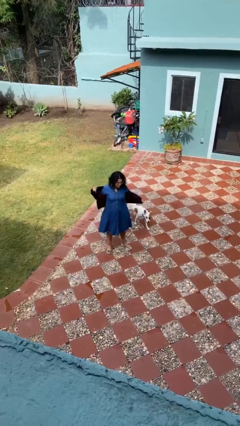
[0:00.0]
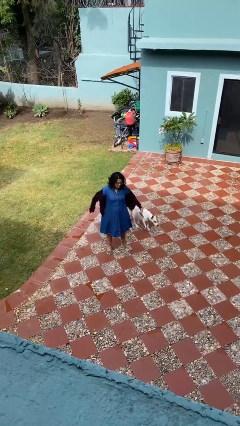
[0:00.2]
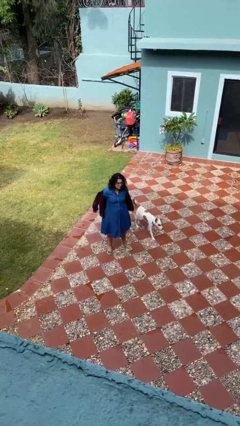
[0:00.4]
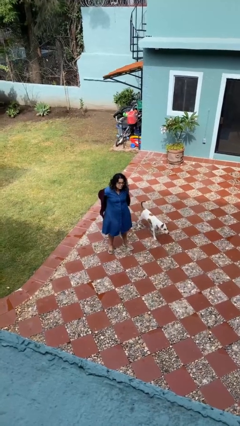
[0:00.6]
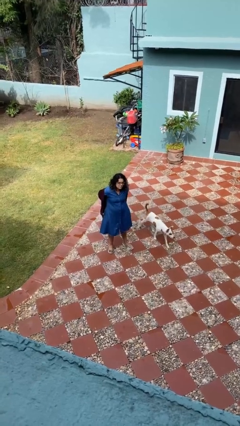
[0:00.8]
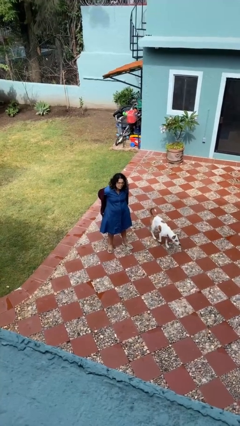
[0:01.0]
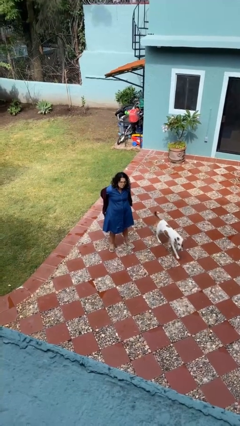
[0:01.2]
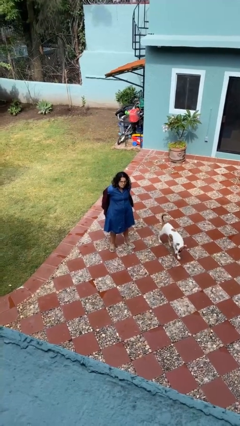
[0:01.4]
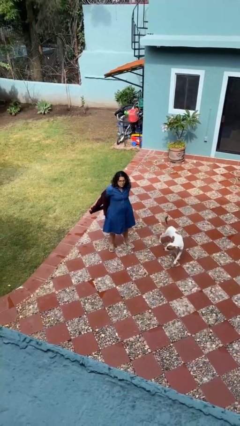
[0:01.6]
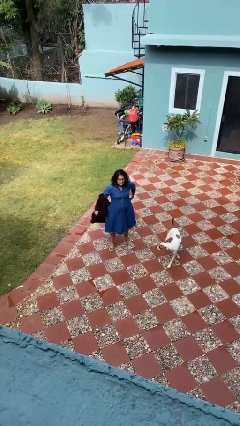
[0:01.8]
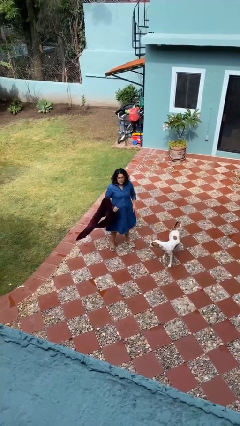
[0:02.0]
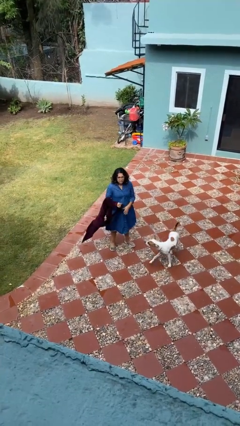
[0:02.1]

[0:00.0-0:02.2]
person takes off jacket

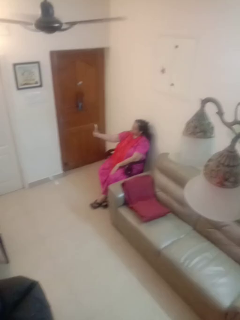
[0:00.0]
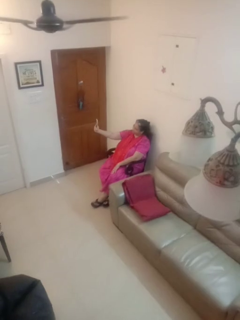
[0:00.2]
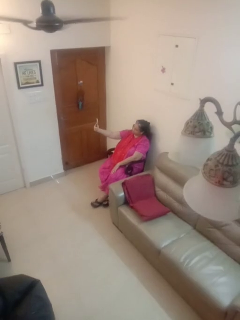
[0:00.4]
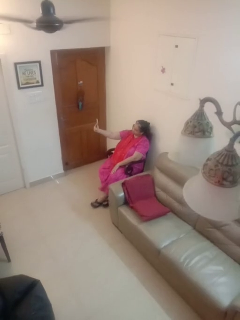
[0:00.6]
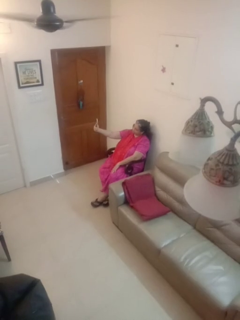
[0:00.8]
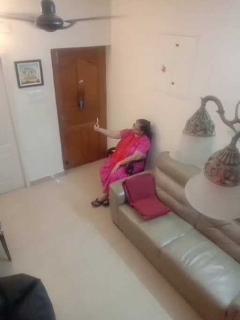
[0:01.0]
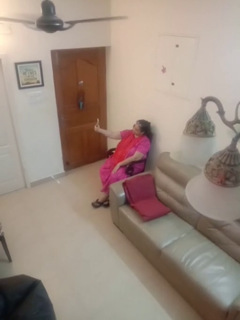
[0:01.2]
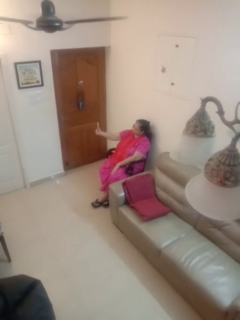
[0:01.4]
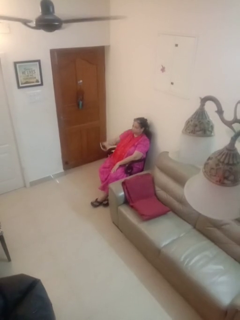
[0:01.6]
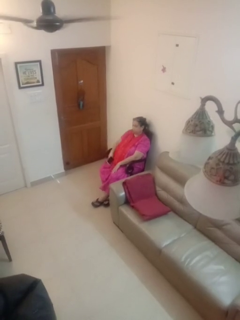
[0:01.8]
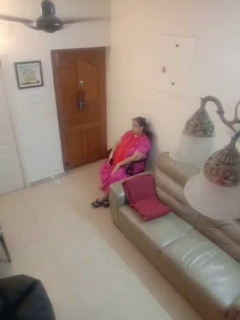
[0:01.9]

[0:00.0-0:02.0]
person takes selfie

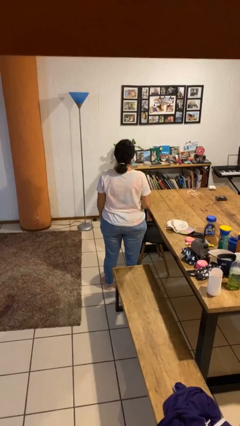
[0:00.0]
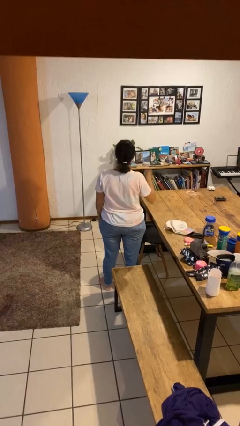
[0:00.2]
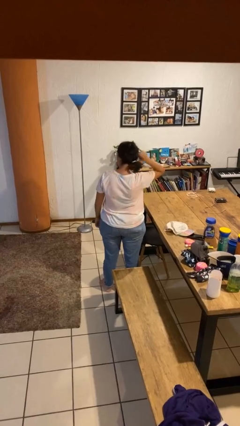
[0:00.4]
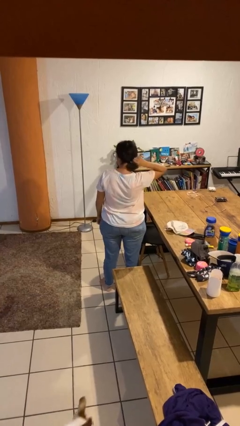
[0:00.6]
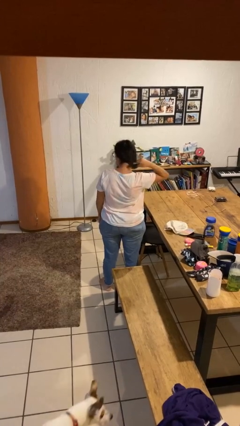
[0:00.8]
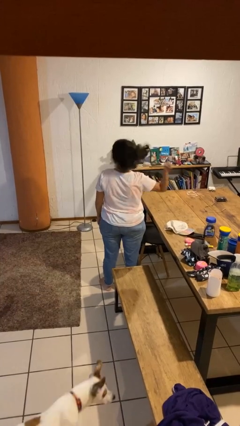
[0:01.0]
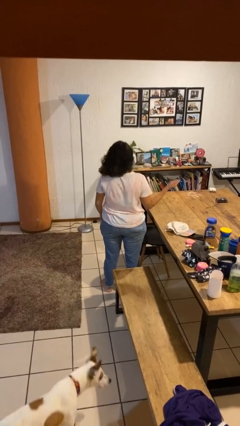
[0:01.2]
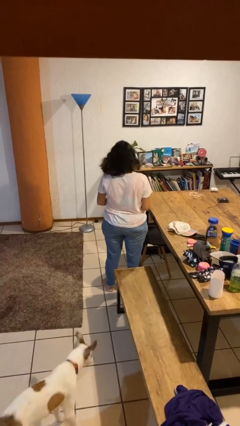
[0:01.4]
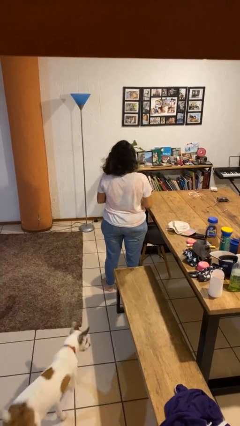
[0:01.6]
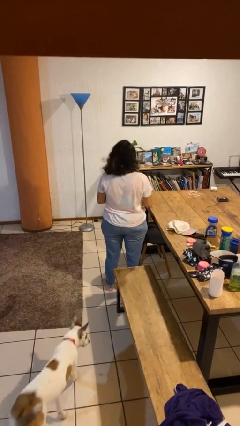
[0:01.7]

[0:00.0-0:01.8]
person takes off hairtie

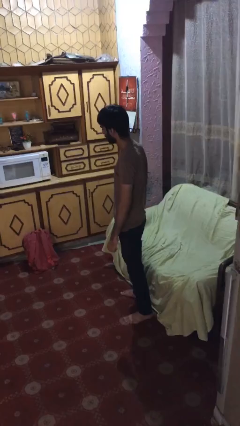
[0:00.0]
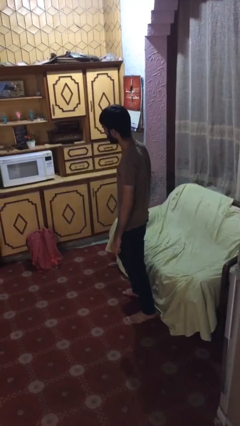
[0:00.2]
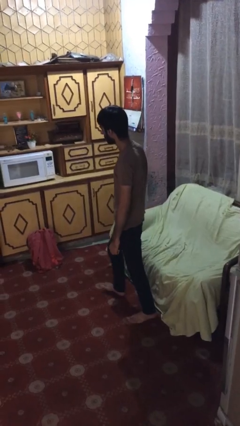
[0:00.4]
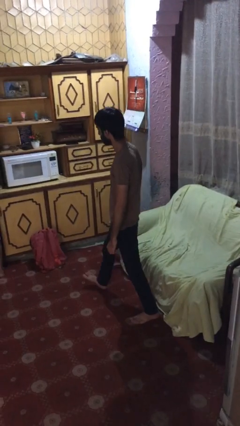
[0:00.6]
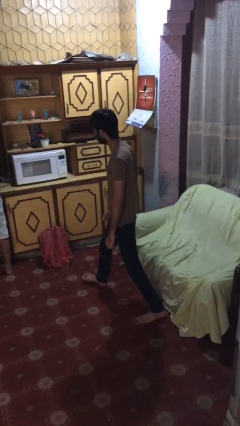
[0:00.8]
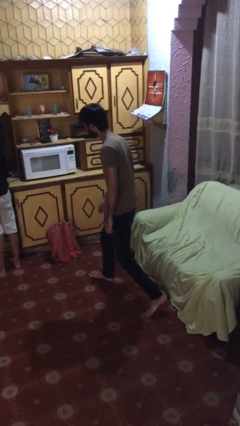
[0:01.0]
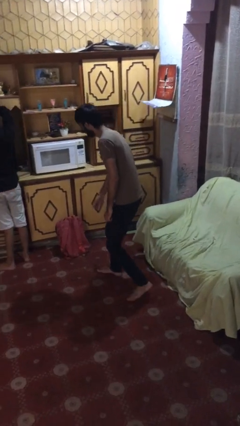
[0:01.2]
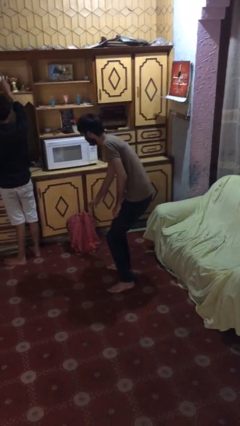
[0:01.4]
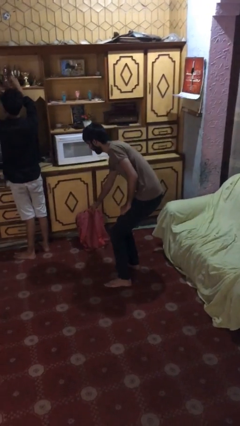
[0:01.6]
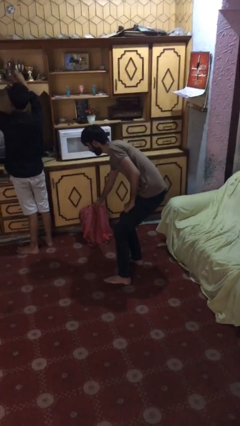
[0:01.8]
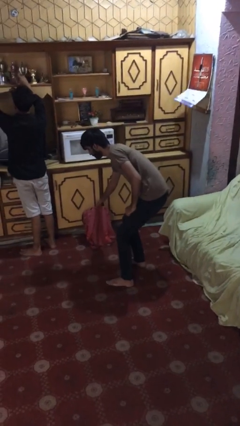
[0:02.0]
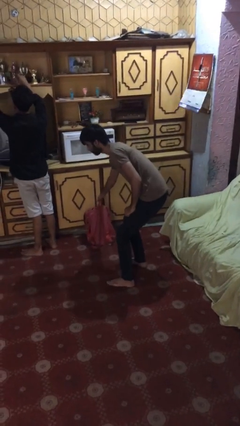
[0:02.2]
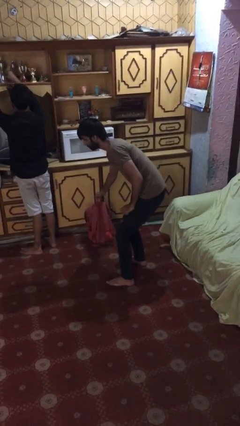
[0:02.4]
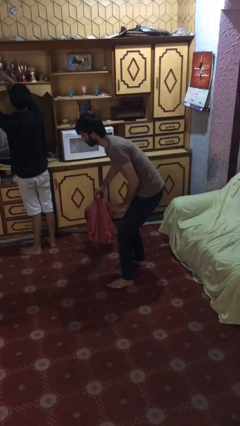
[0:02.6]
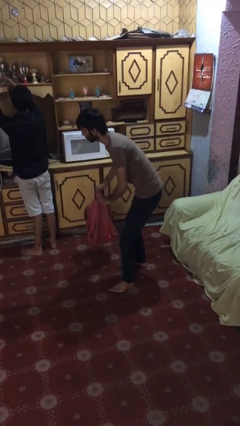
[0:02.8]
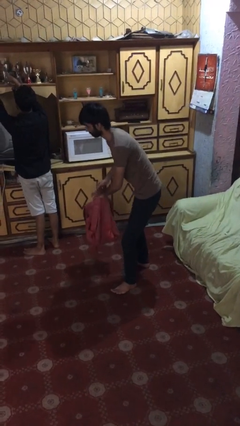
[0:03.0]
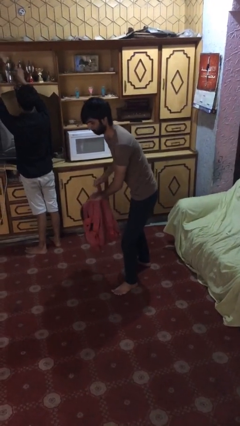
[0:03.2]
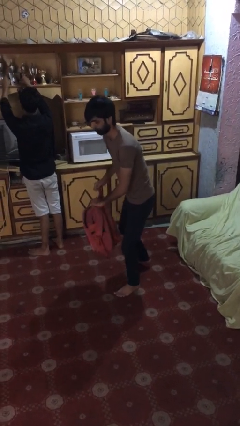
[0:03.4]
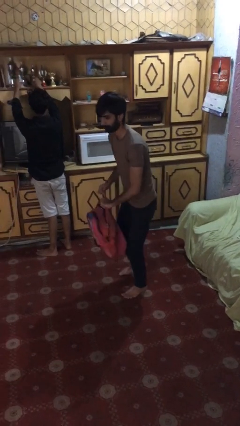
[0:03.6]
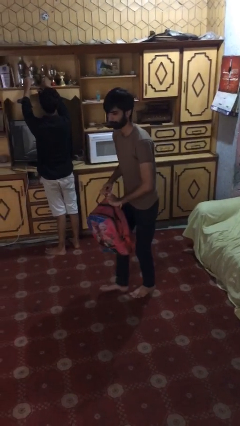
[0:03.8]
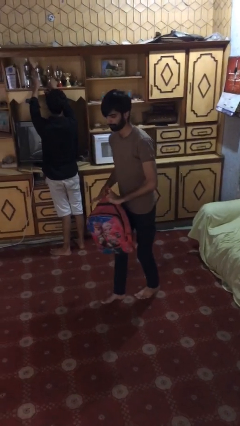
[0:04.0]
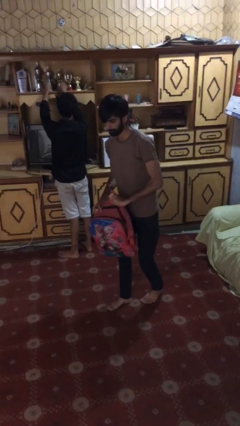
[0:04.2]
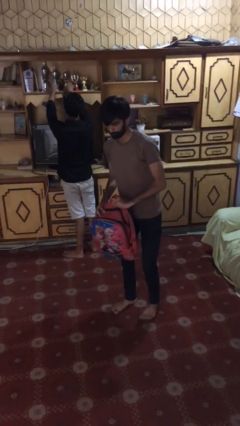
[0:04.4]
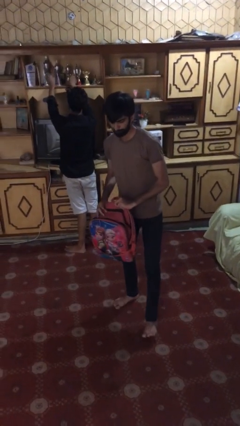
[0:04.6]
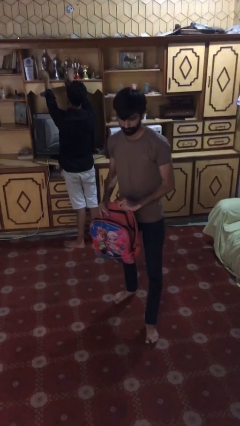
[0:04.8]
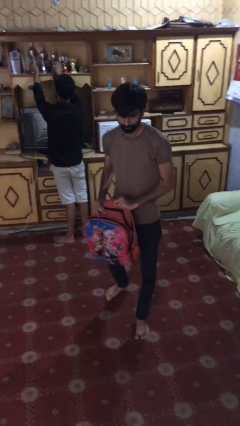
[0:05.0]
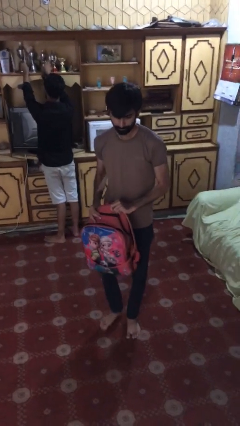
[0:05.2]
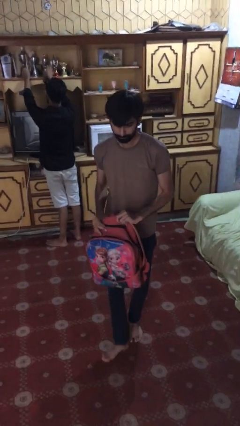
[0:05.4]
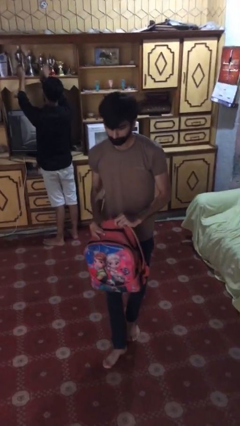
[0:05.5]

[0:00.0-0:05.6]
person steals object from person

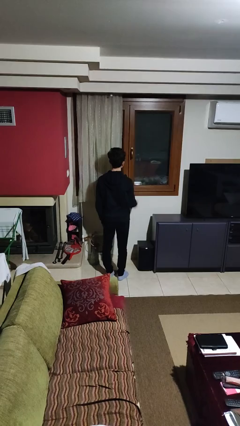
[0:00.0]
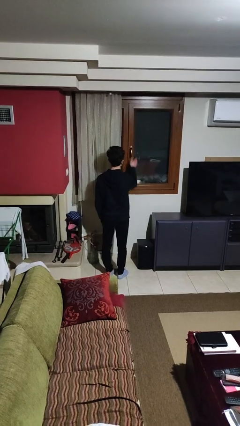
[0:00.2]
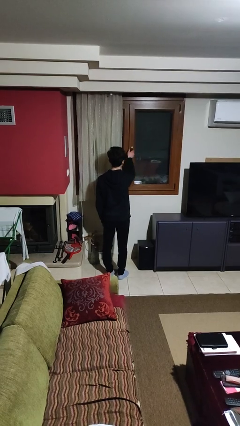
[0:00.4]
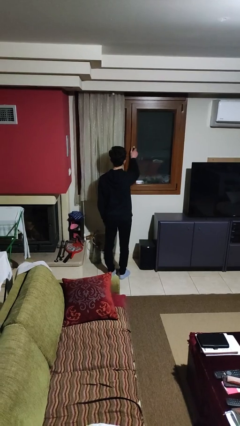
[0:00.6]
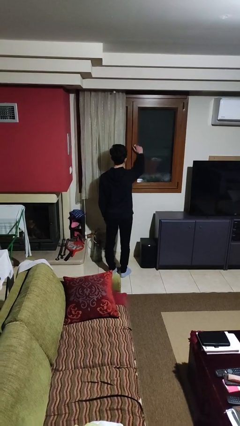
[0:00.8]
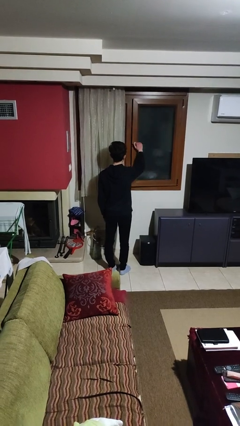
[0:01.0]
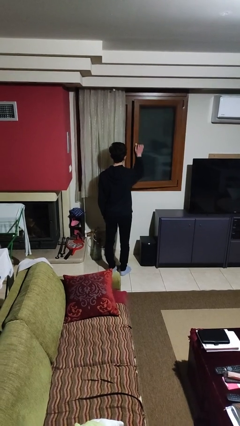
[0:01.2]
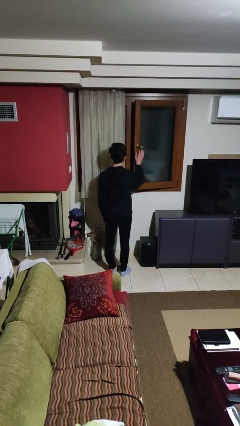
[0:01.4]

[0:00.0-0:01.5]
person opens home window

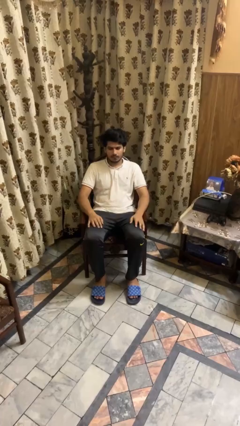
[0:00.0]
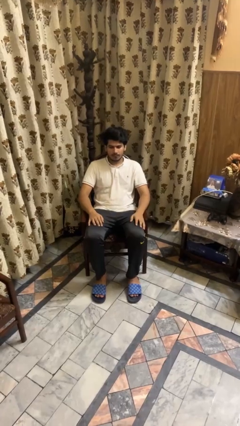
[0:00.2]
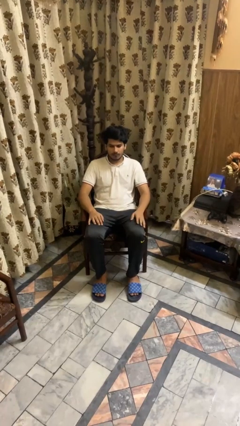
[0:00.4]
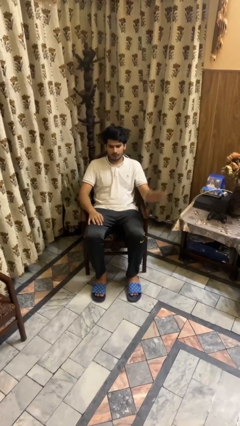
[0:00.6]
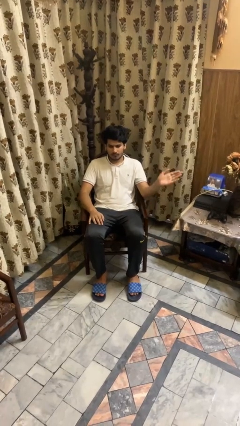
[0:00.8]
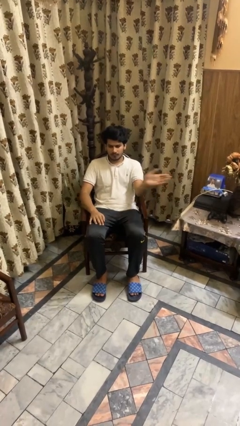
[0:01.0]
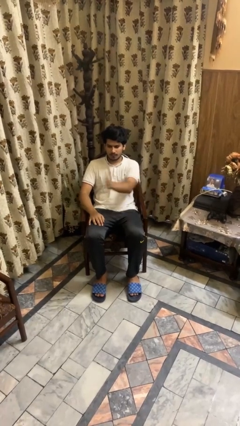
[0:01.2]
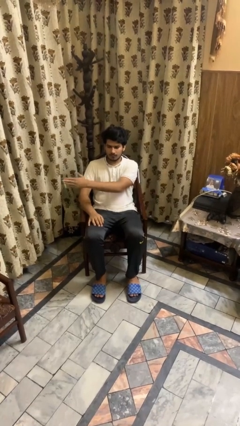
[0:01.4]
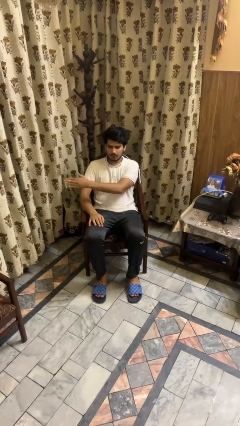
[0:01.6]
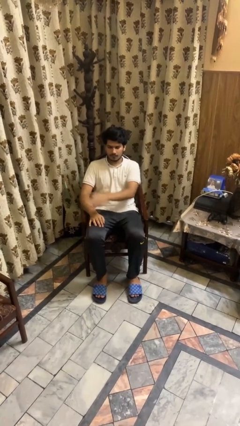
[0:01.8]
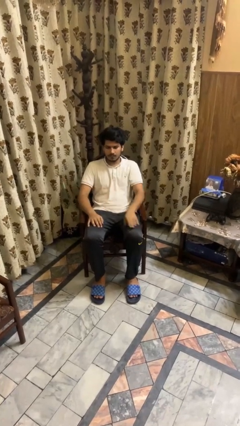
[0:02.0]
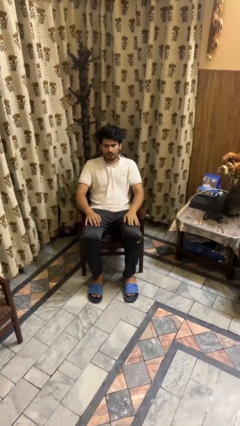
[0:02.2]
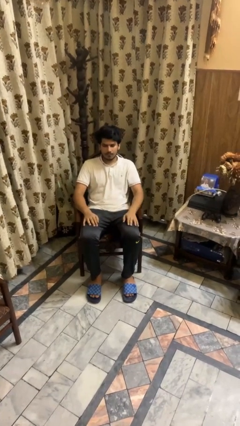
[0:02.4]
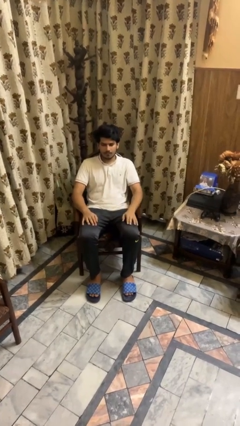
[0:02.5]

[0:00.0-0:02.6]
person gestures swipe right

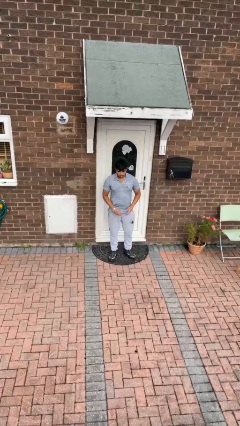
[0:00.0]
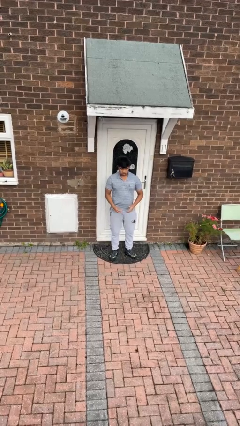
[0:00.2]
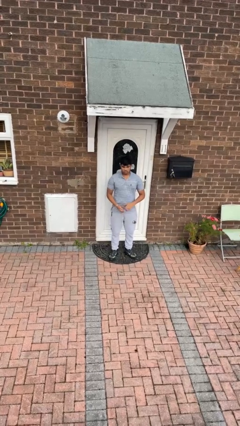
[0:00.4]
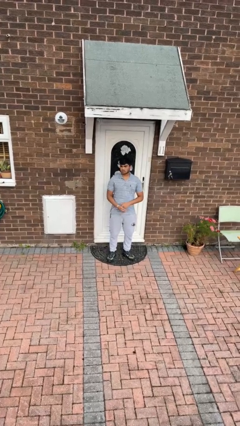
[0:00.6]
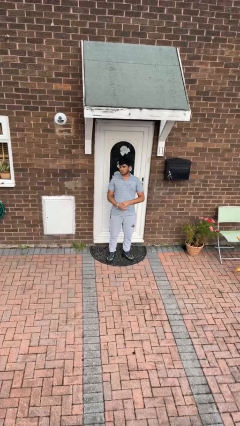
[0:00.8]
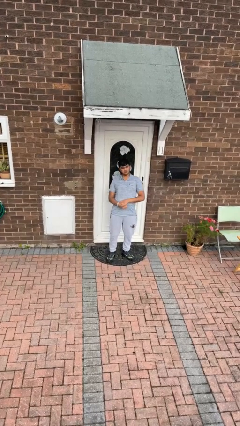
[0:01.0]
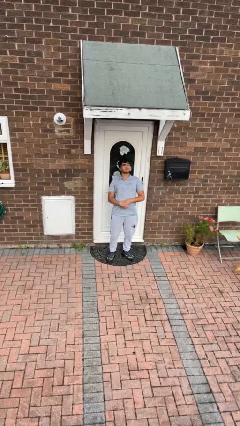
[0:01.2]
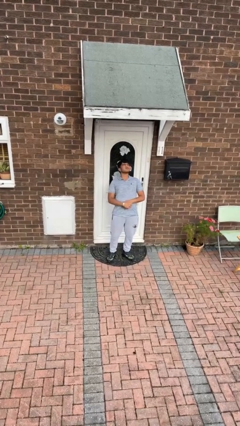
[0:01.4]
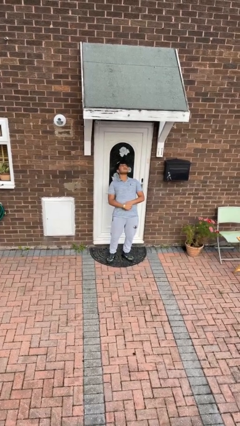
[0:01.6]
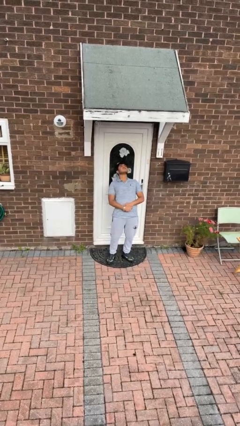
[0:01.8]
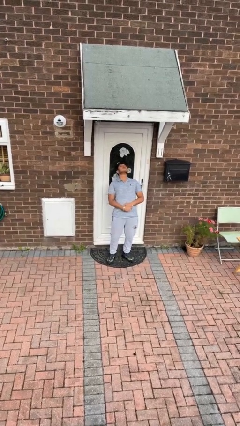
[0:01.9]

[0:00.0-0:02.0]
person stretches back
